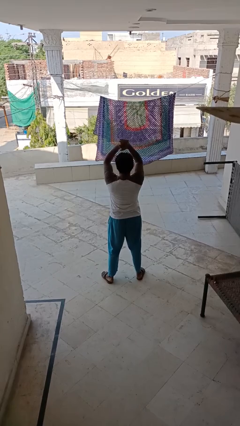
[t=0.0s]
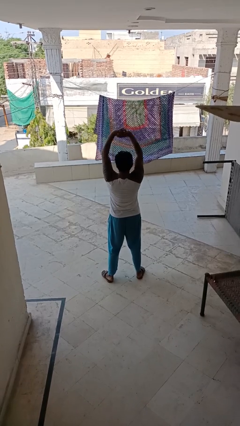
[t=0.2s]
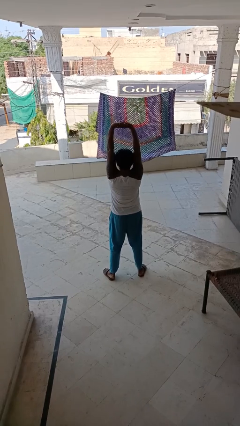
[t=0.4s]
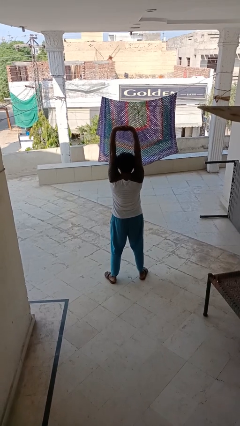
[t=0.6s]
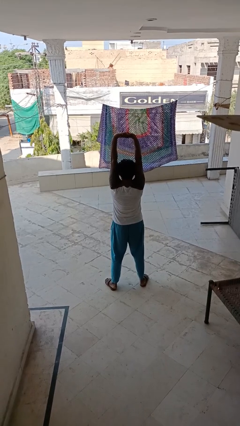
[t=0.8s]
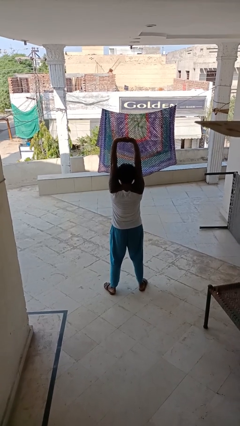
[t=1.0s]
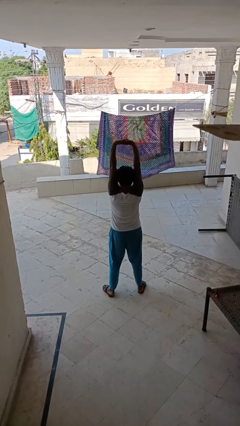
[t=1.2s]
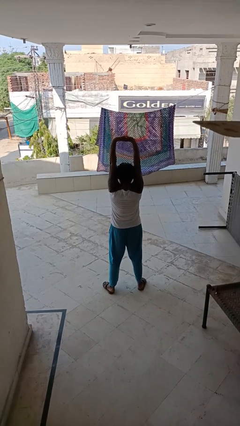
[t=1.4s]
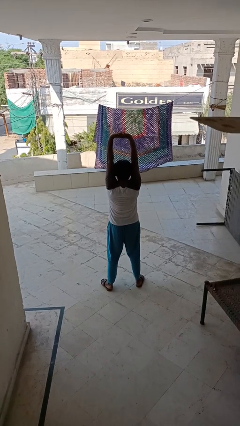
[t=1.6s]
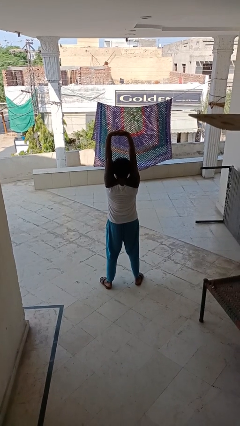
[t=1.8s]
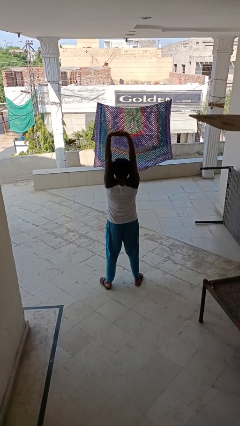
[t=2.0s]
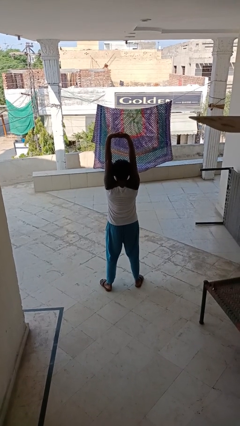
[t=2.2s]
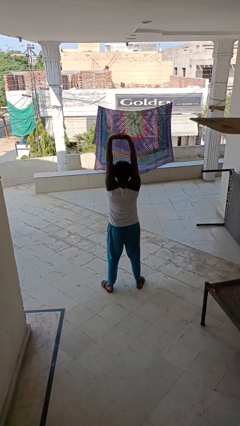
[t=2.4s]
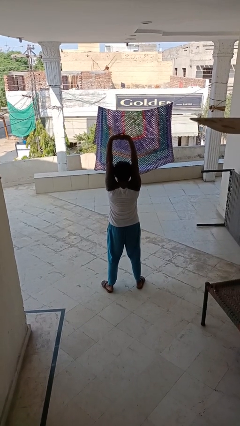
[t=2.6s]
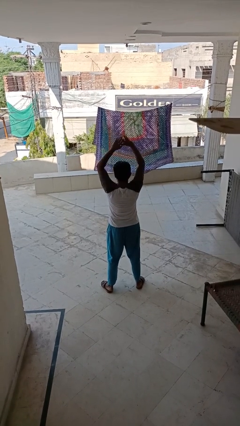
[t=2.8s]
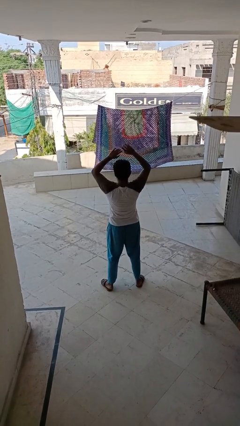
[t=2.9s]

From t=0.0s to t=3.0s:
person stretches arms over head

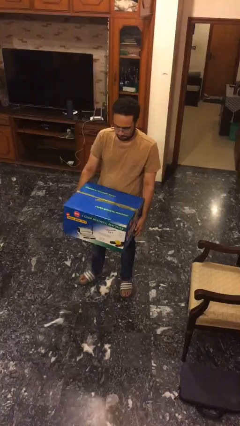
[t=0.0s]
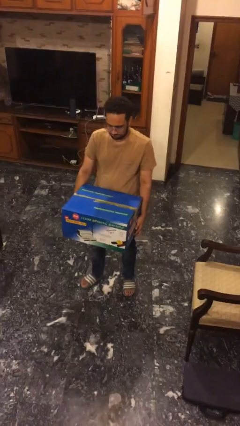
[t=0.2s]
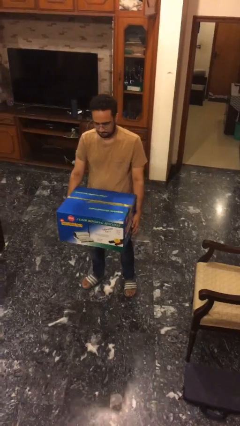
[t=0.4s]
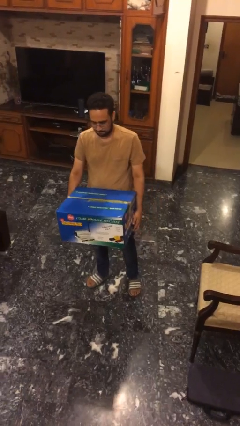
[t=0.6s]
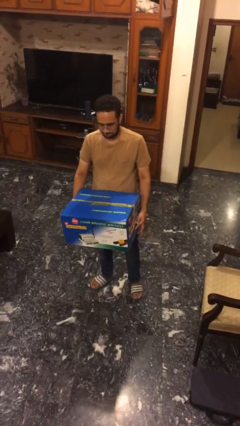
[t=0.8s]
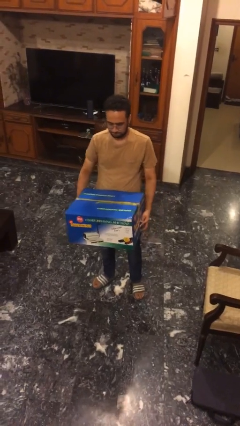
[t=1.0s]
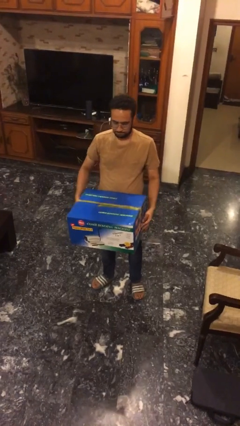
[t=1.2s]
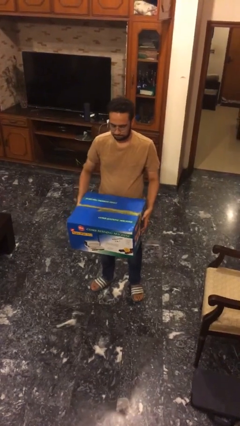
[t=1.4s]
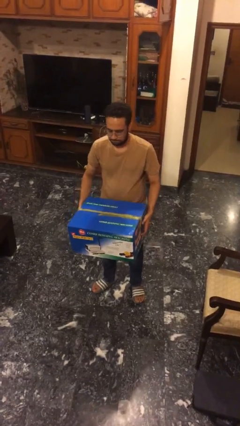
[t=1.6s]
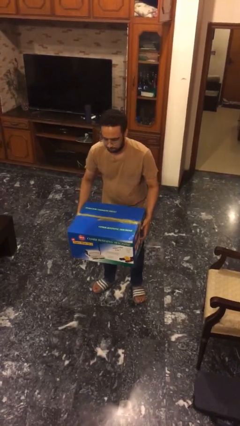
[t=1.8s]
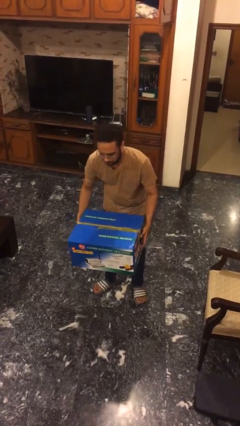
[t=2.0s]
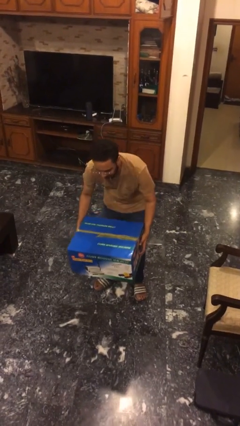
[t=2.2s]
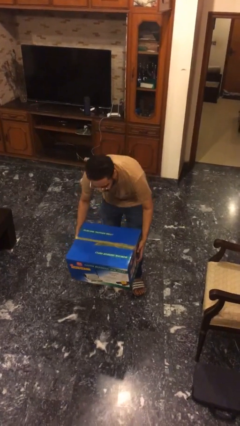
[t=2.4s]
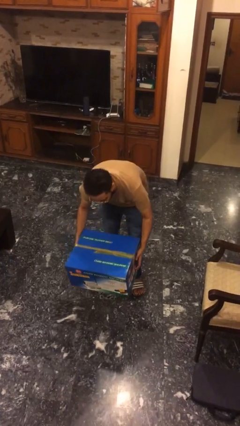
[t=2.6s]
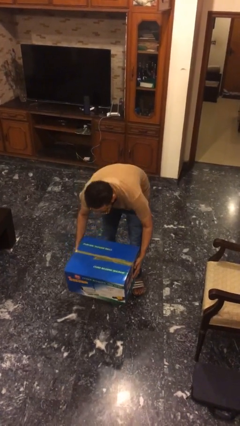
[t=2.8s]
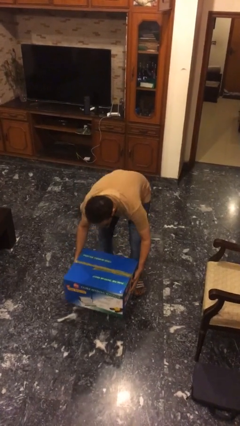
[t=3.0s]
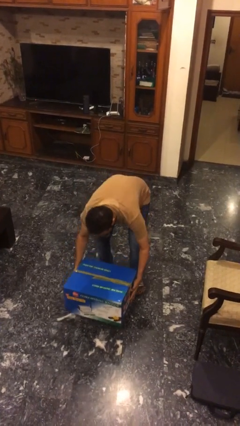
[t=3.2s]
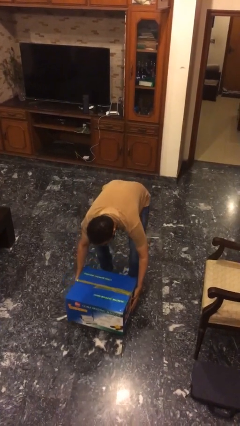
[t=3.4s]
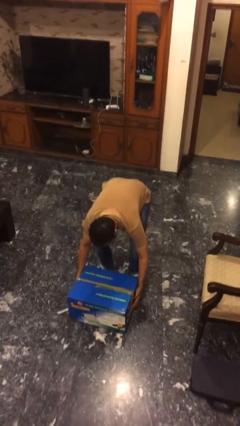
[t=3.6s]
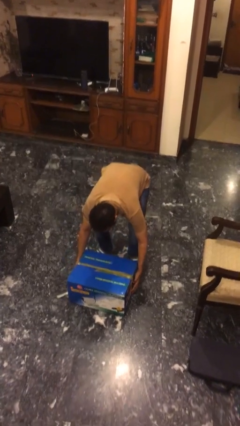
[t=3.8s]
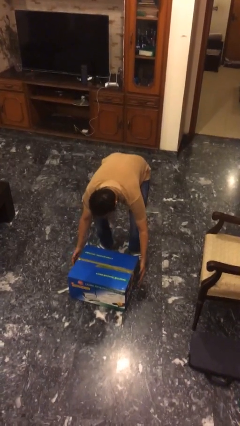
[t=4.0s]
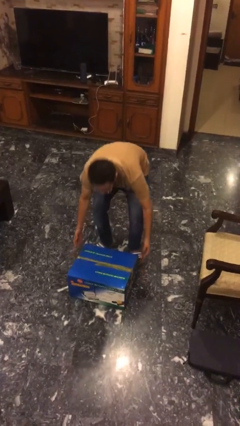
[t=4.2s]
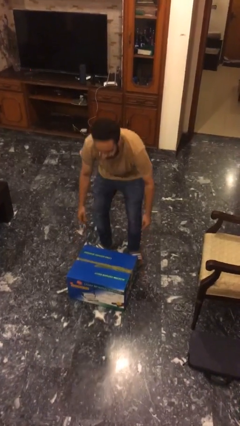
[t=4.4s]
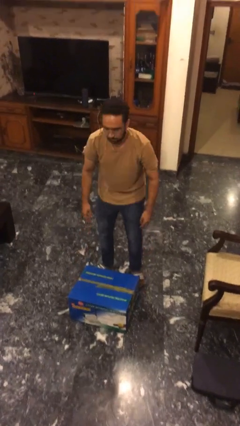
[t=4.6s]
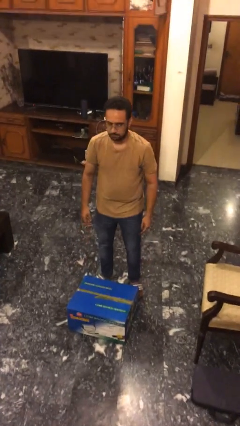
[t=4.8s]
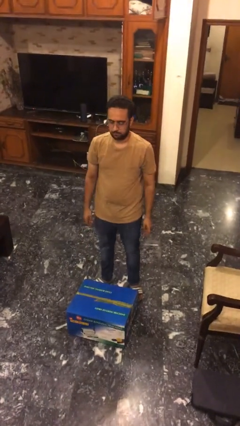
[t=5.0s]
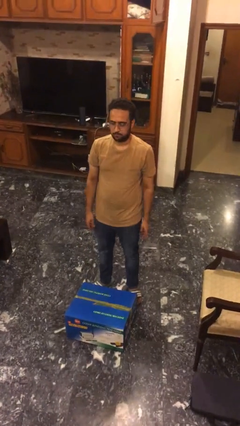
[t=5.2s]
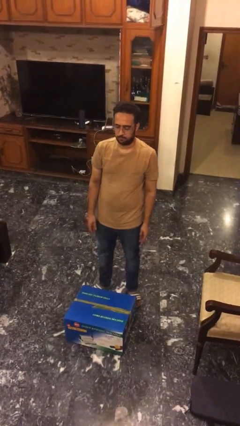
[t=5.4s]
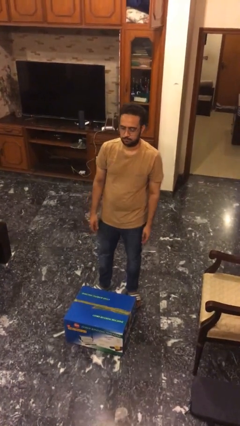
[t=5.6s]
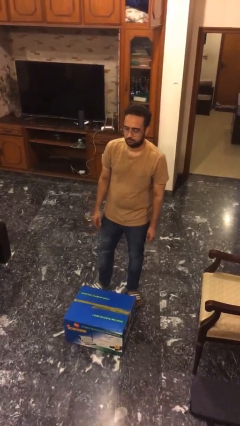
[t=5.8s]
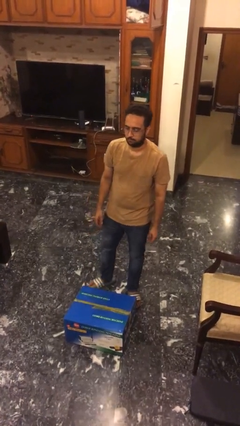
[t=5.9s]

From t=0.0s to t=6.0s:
person puts down object on floor

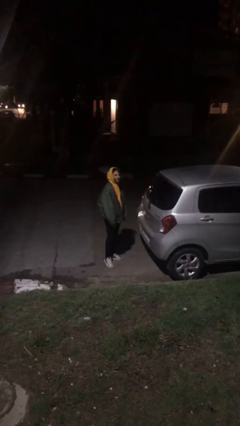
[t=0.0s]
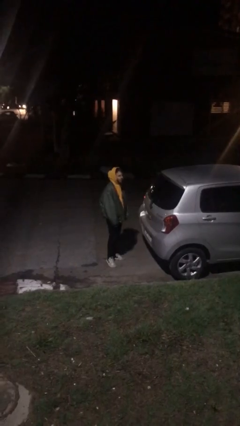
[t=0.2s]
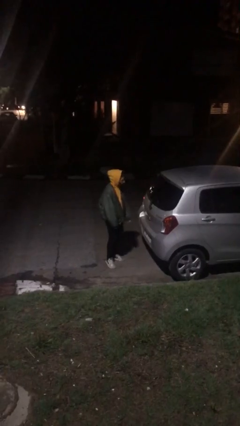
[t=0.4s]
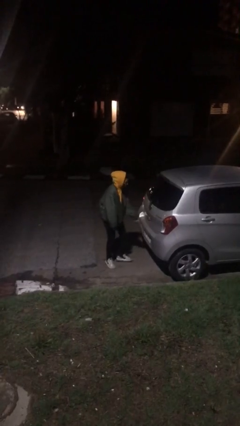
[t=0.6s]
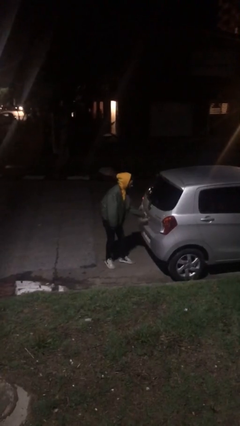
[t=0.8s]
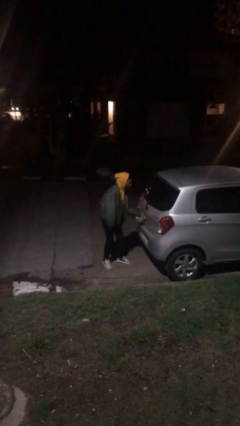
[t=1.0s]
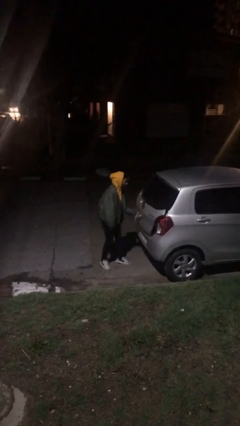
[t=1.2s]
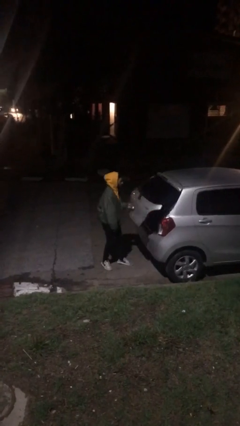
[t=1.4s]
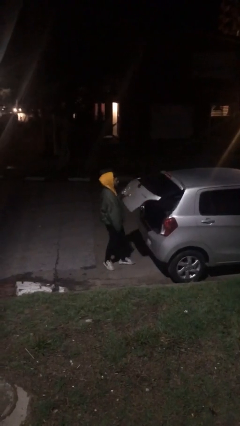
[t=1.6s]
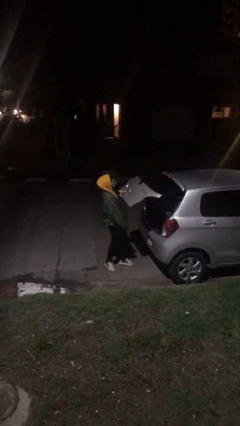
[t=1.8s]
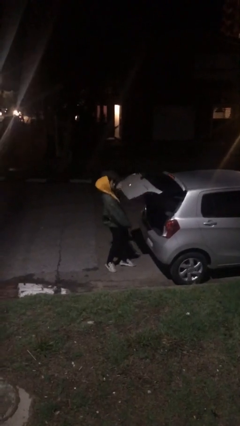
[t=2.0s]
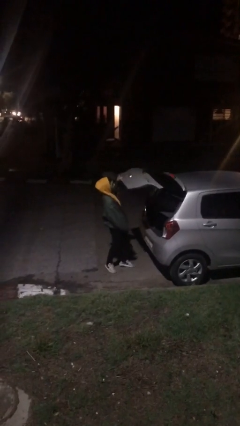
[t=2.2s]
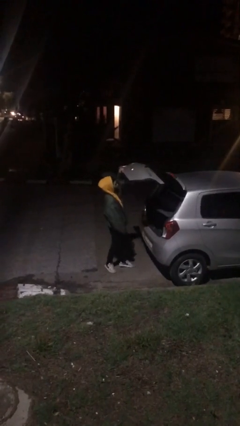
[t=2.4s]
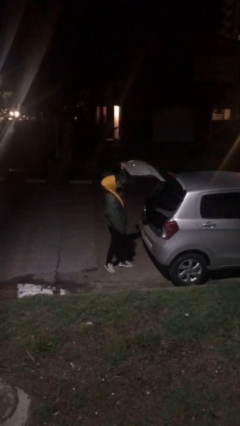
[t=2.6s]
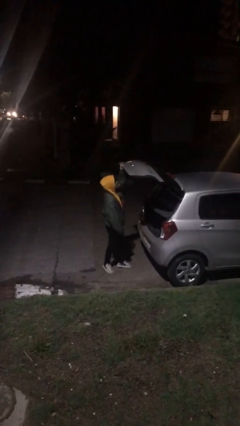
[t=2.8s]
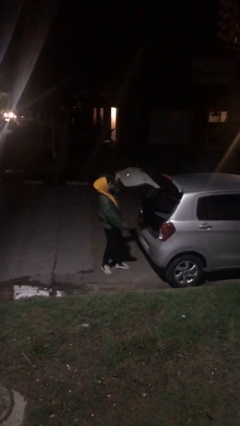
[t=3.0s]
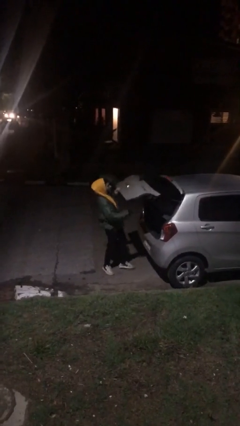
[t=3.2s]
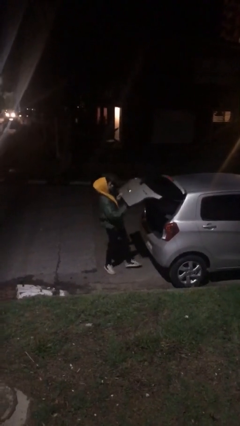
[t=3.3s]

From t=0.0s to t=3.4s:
person opens car trunk

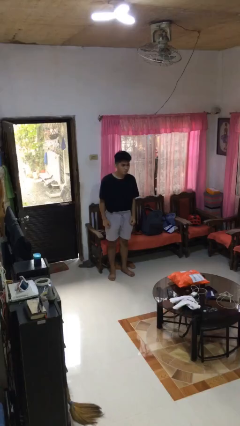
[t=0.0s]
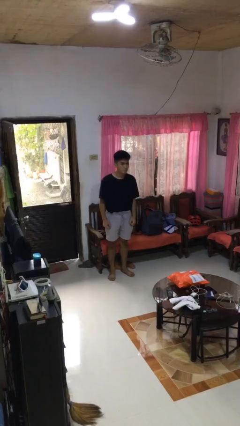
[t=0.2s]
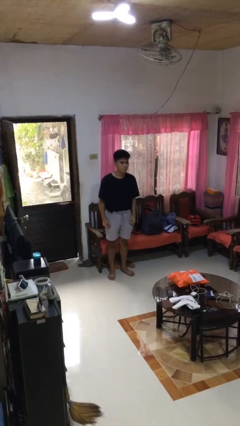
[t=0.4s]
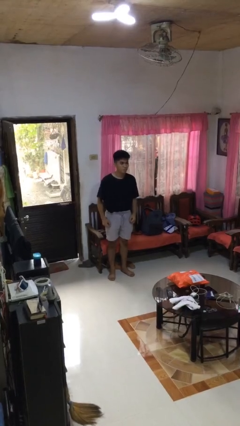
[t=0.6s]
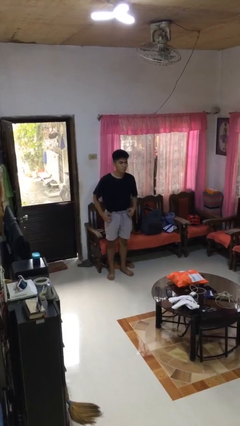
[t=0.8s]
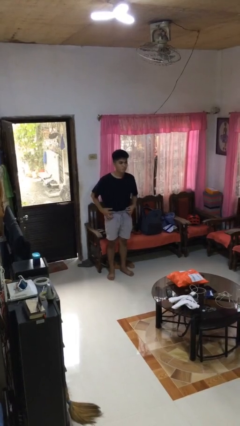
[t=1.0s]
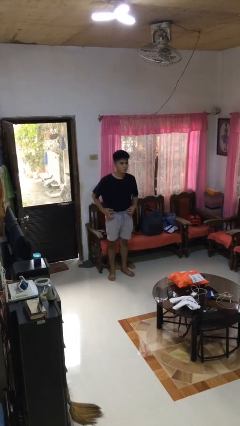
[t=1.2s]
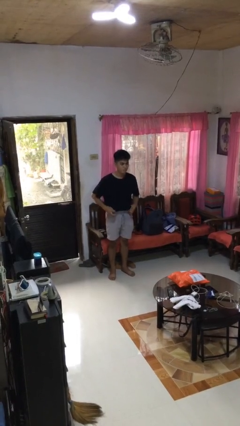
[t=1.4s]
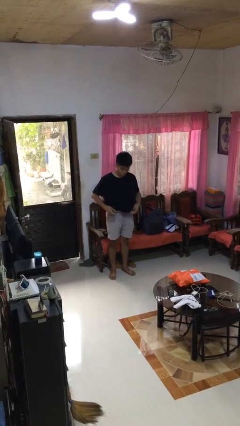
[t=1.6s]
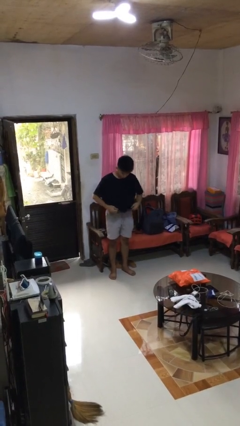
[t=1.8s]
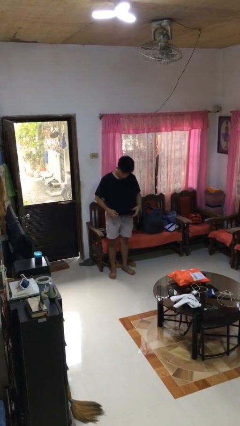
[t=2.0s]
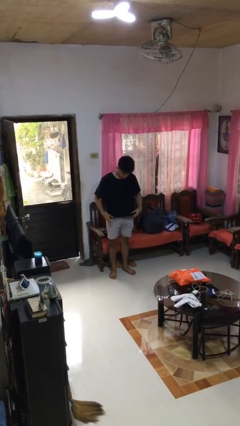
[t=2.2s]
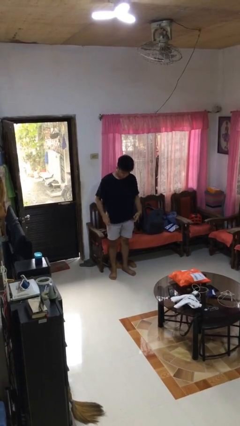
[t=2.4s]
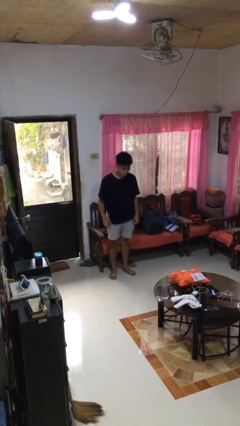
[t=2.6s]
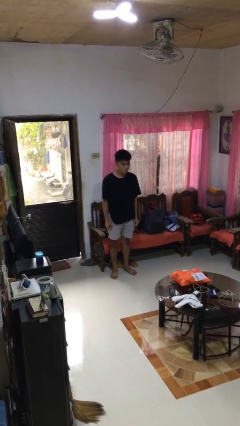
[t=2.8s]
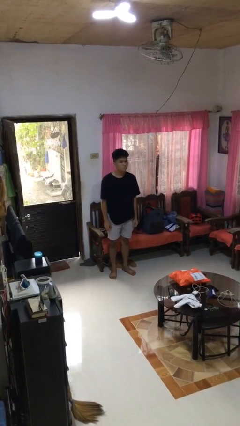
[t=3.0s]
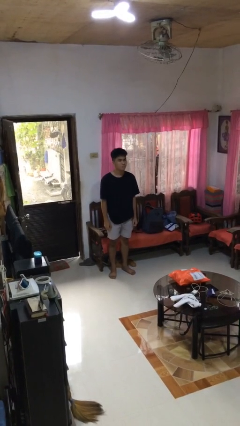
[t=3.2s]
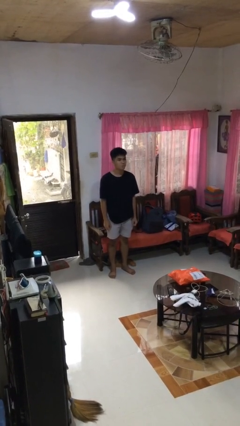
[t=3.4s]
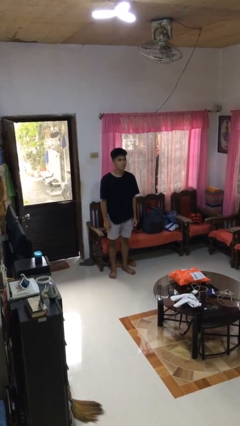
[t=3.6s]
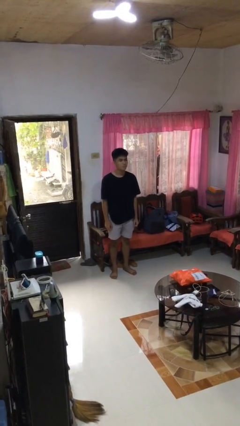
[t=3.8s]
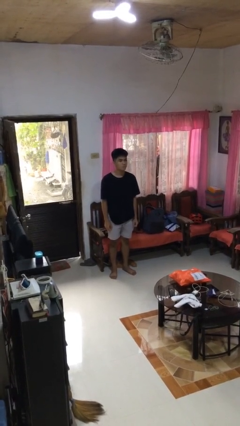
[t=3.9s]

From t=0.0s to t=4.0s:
person untucks shirt

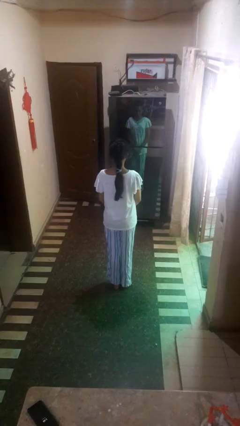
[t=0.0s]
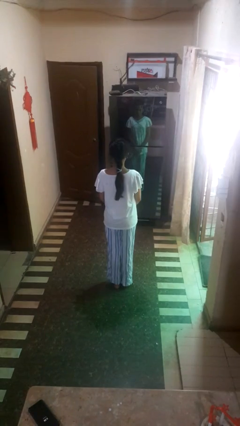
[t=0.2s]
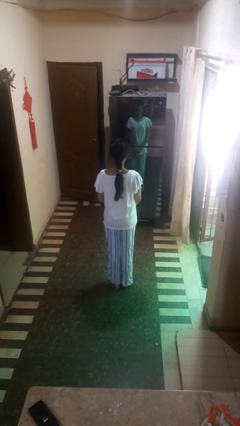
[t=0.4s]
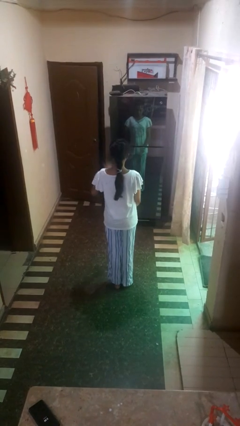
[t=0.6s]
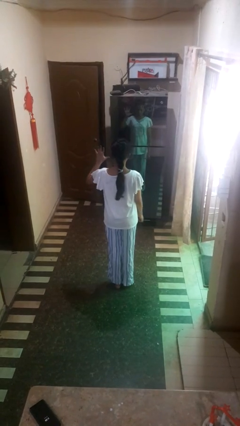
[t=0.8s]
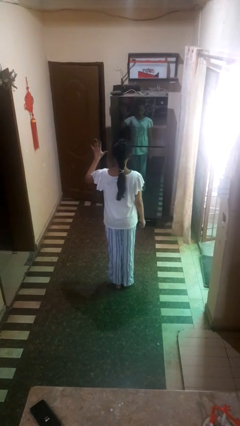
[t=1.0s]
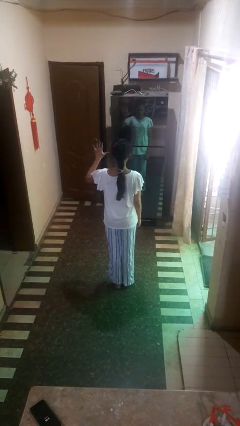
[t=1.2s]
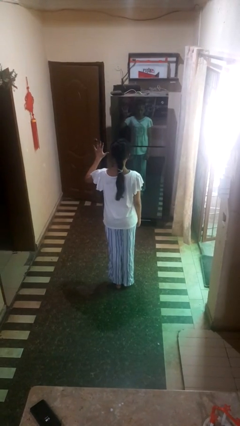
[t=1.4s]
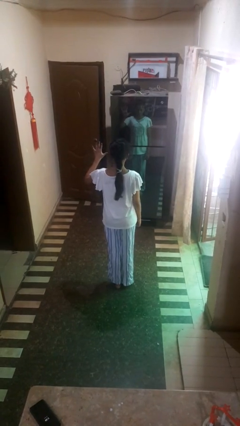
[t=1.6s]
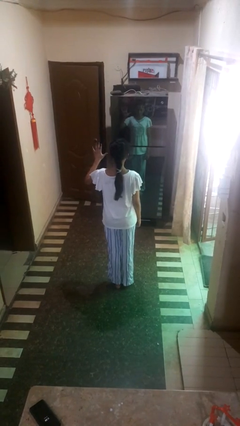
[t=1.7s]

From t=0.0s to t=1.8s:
person gestures number five
